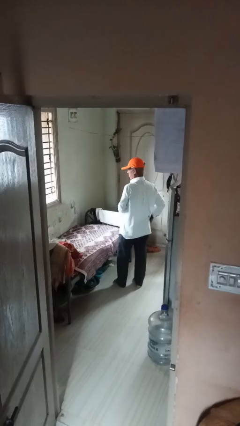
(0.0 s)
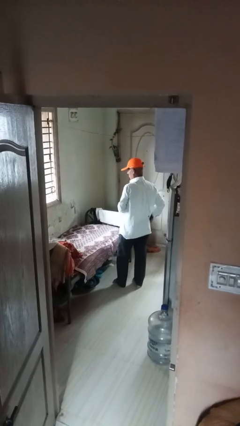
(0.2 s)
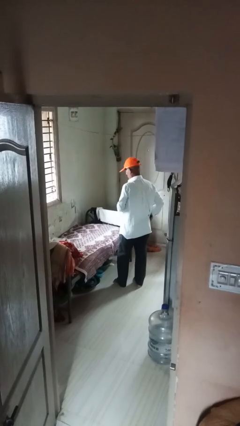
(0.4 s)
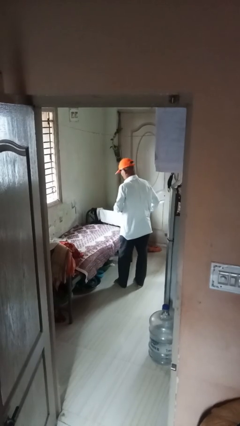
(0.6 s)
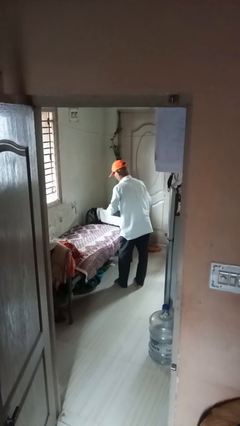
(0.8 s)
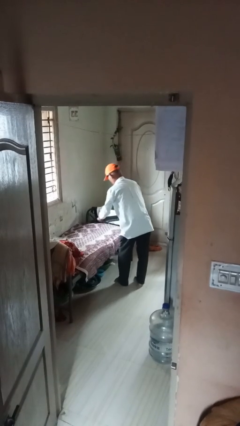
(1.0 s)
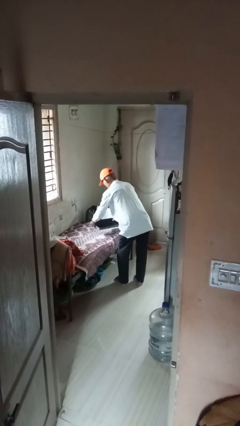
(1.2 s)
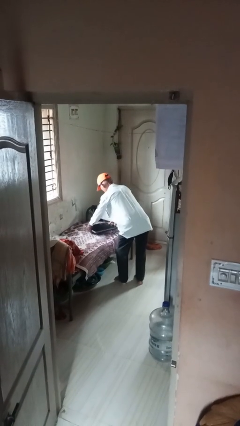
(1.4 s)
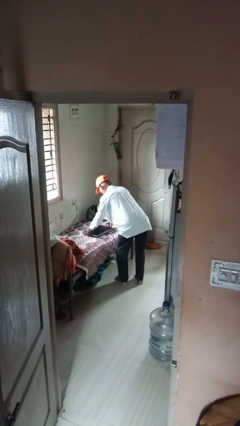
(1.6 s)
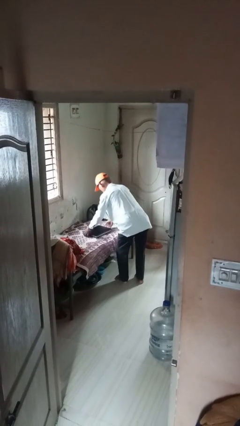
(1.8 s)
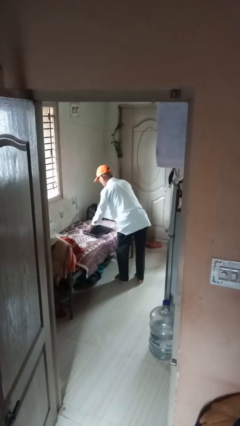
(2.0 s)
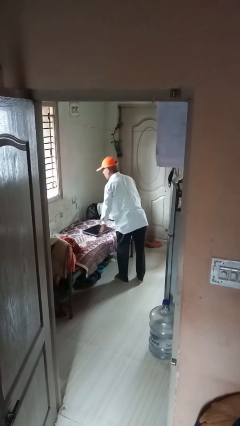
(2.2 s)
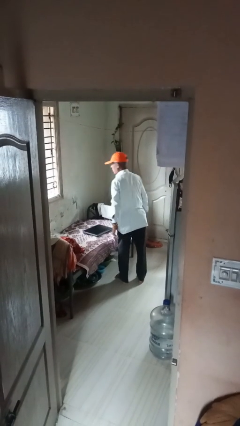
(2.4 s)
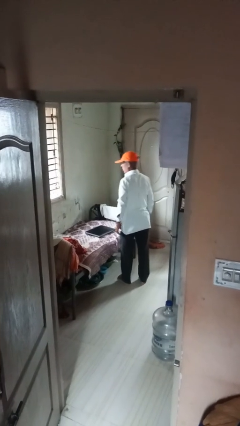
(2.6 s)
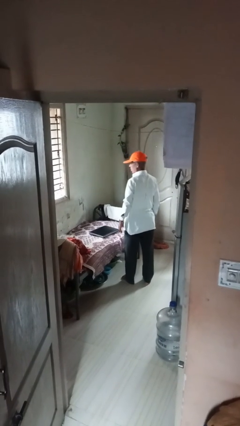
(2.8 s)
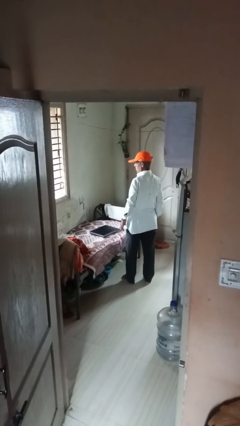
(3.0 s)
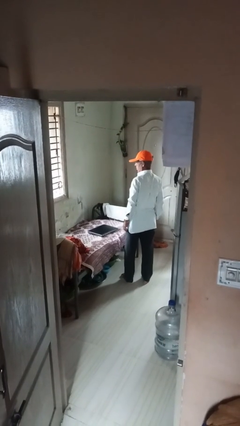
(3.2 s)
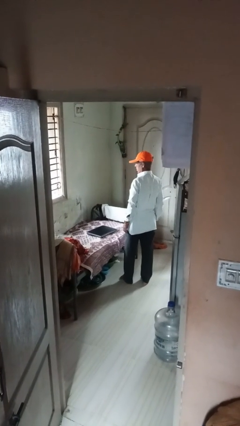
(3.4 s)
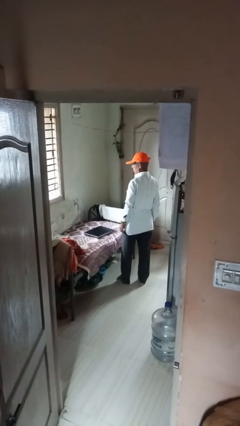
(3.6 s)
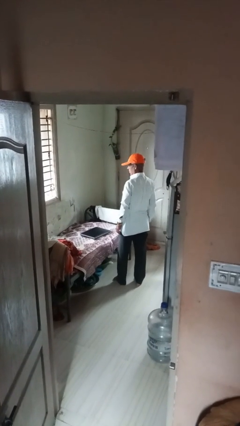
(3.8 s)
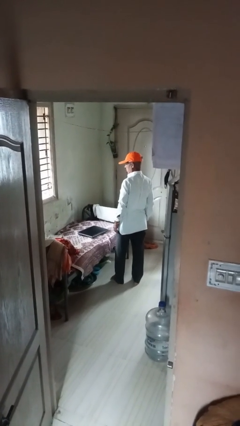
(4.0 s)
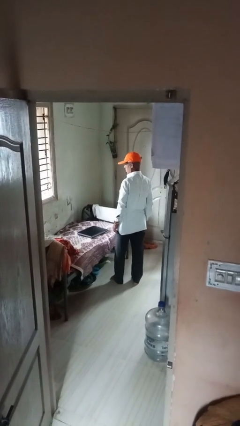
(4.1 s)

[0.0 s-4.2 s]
person puts down object on bed

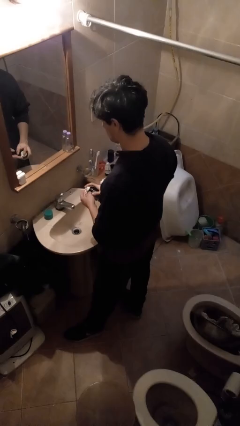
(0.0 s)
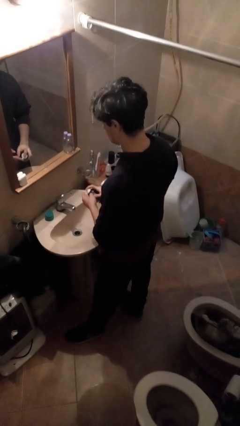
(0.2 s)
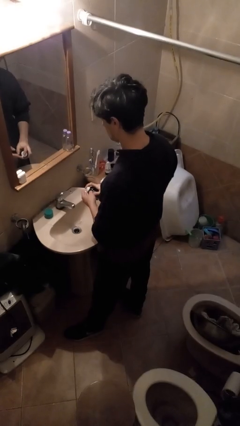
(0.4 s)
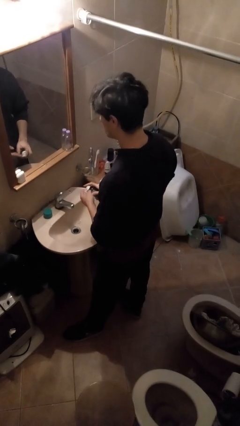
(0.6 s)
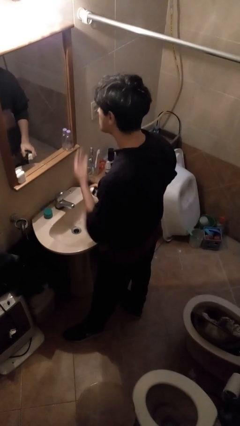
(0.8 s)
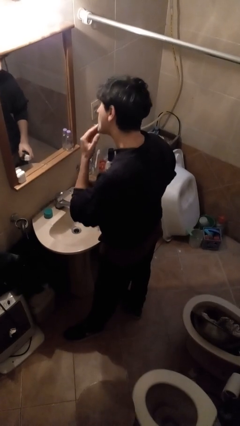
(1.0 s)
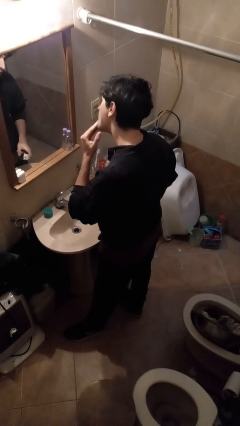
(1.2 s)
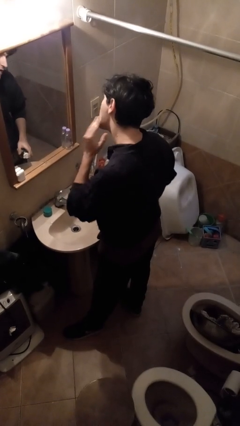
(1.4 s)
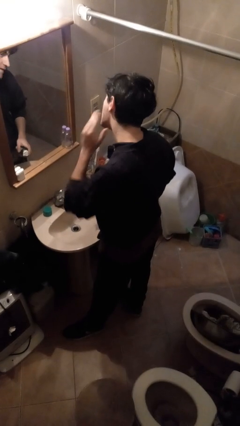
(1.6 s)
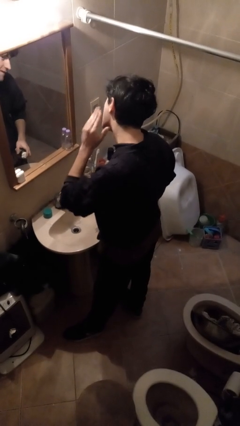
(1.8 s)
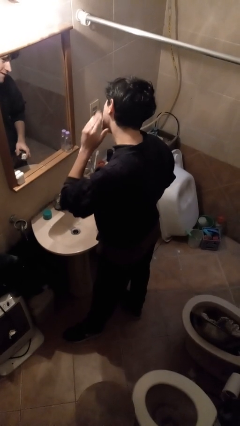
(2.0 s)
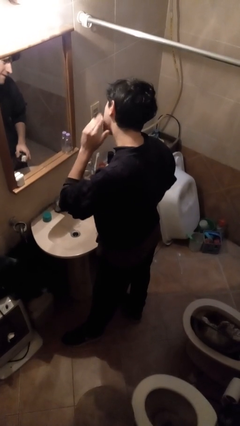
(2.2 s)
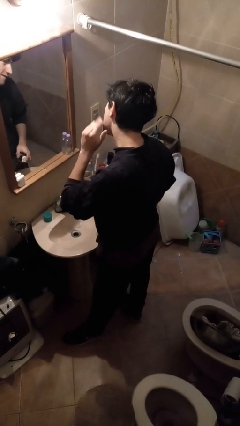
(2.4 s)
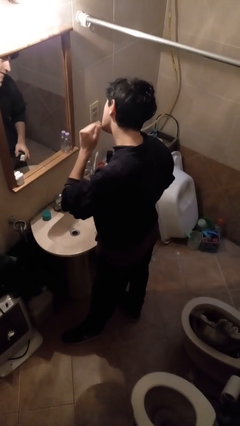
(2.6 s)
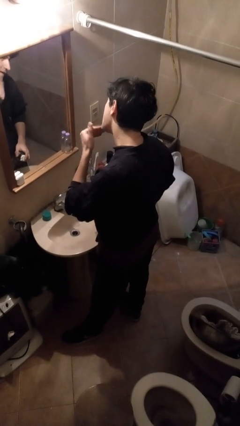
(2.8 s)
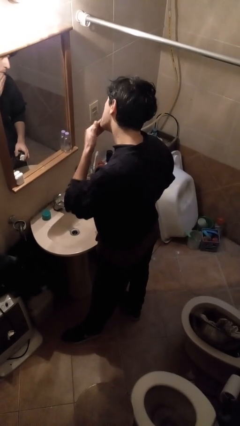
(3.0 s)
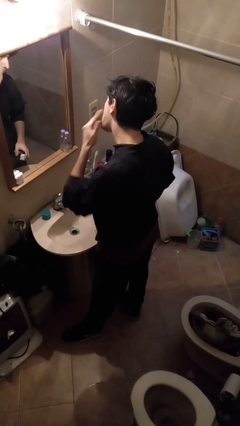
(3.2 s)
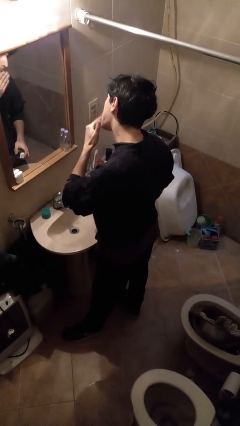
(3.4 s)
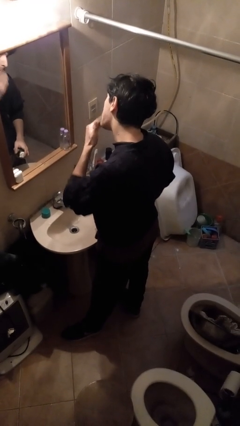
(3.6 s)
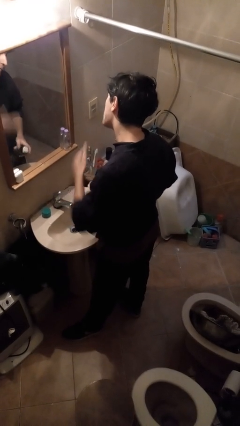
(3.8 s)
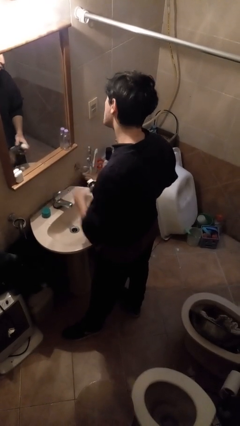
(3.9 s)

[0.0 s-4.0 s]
person applies shaving cream

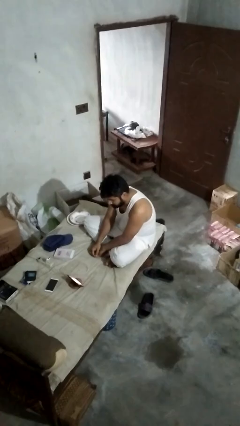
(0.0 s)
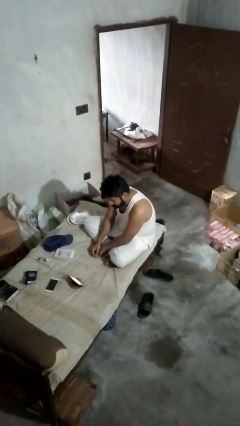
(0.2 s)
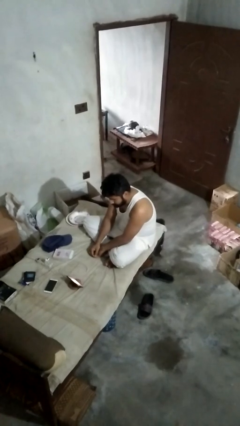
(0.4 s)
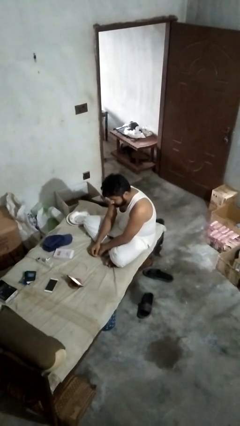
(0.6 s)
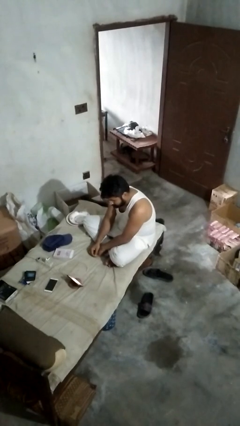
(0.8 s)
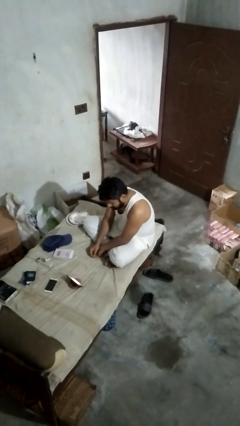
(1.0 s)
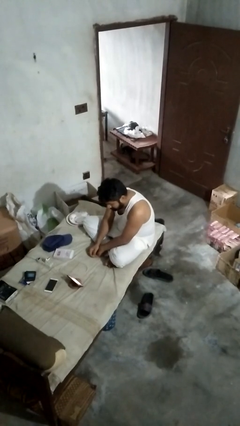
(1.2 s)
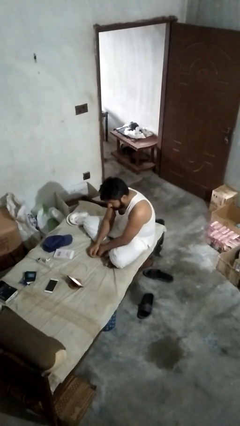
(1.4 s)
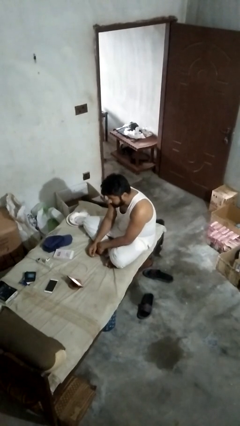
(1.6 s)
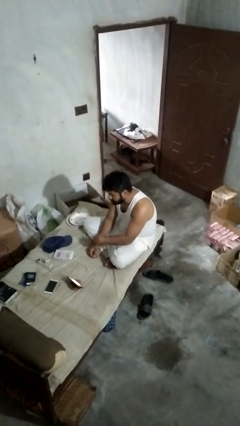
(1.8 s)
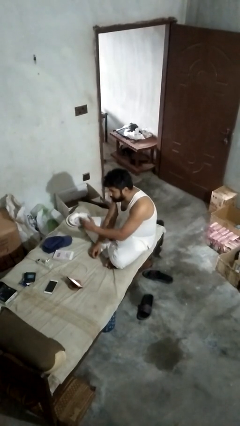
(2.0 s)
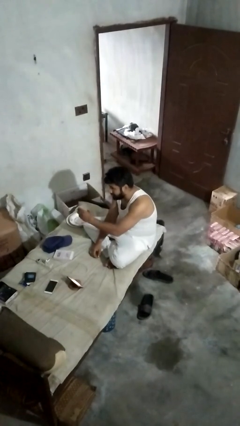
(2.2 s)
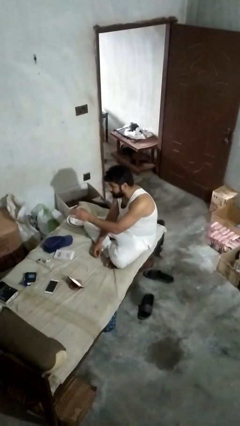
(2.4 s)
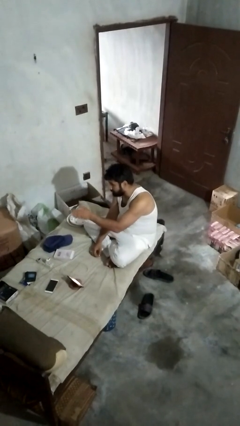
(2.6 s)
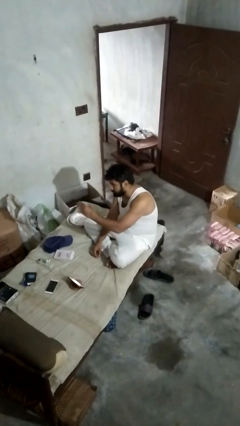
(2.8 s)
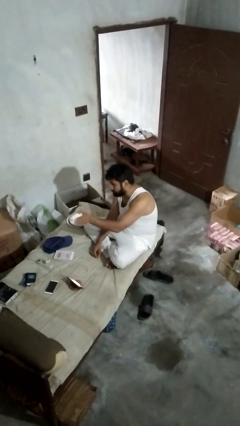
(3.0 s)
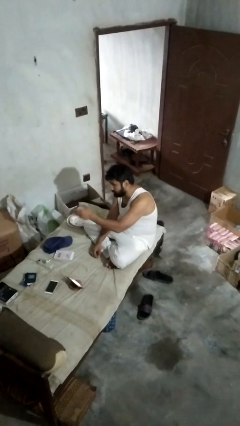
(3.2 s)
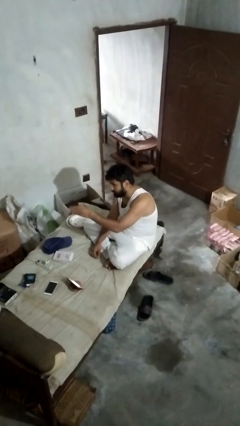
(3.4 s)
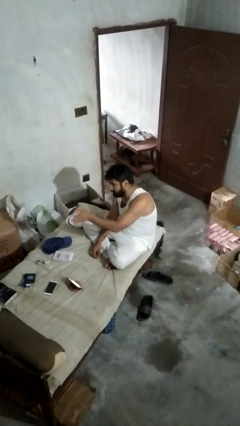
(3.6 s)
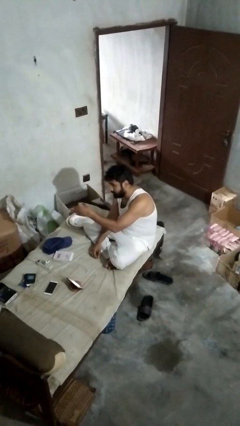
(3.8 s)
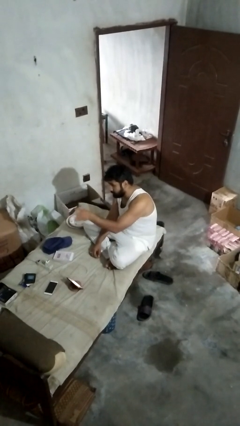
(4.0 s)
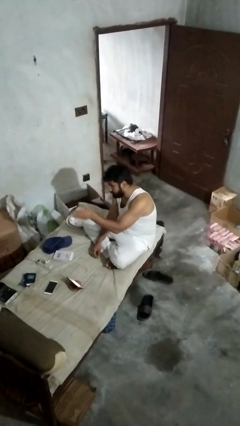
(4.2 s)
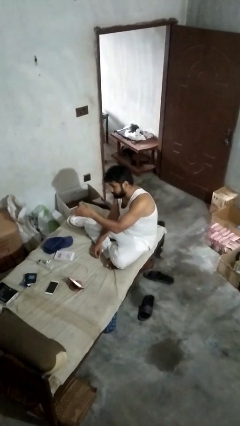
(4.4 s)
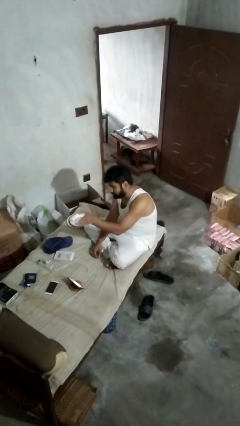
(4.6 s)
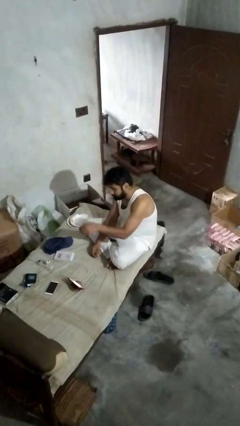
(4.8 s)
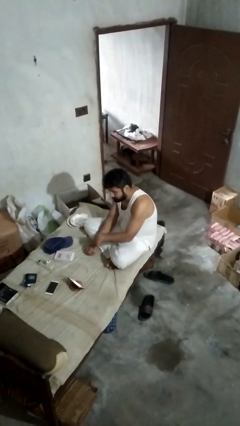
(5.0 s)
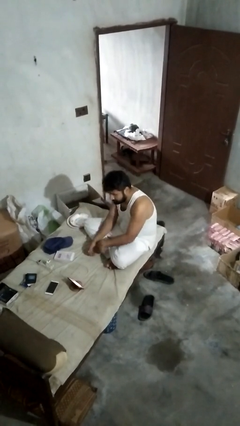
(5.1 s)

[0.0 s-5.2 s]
person gestures swipe left

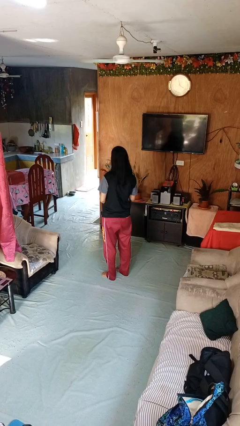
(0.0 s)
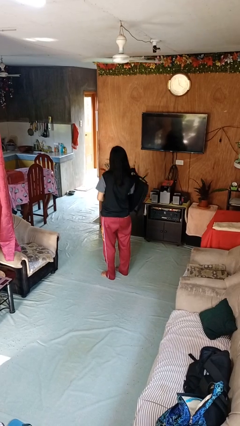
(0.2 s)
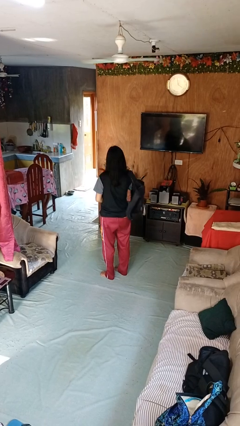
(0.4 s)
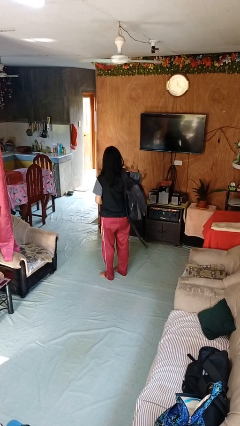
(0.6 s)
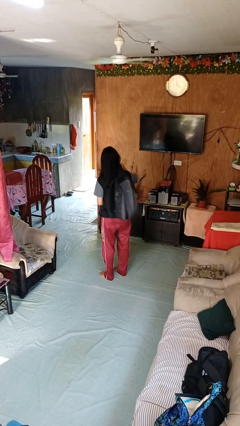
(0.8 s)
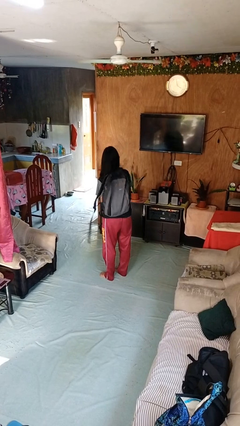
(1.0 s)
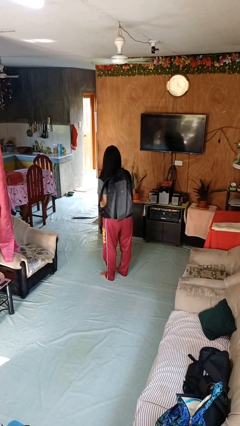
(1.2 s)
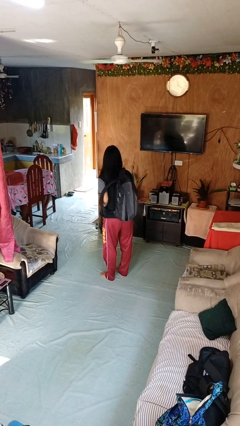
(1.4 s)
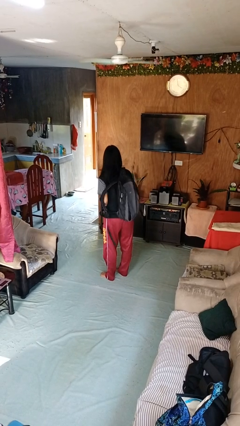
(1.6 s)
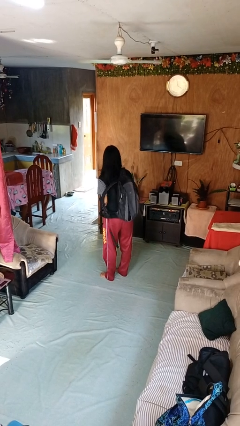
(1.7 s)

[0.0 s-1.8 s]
person puts on backpack

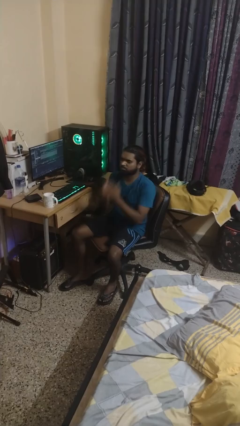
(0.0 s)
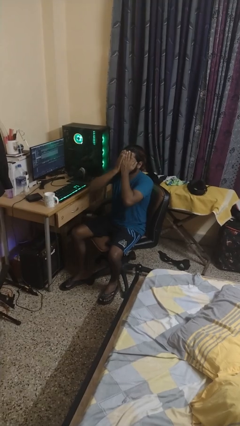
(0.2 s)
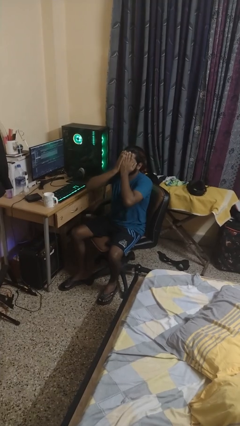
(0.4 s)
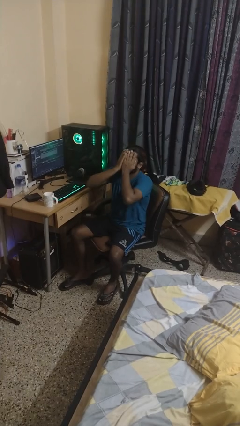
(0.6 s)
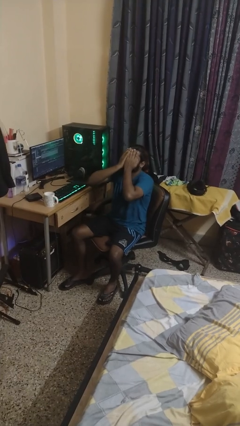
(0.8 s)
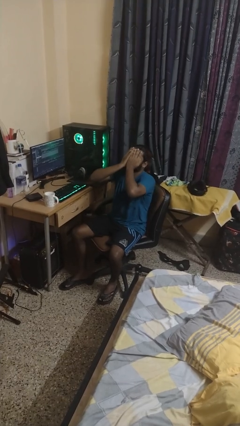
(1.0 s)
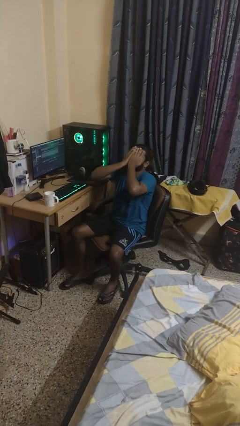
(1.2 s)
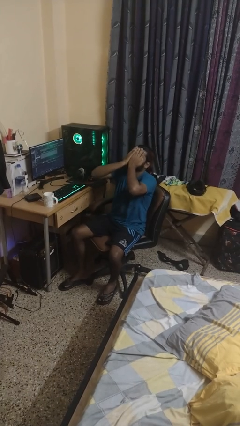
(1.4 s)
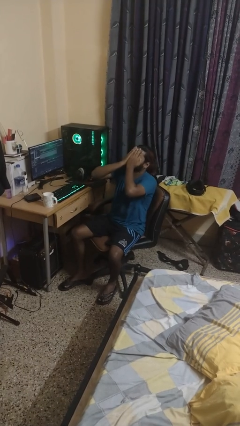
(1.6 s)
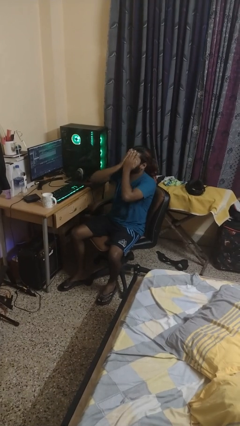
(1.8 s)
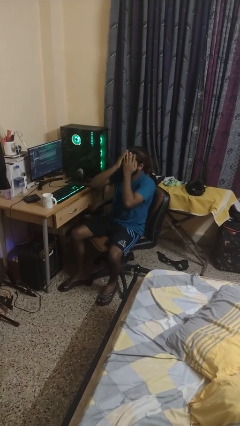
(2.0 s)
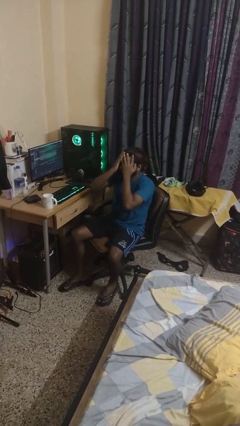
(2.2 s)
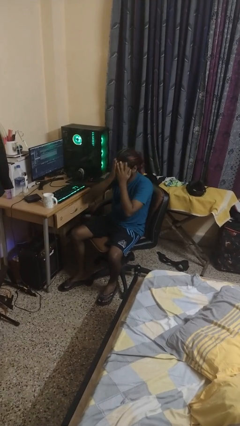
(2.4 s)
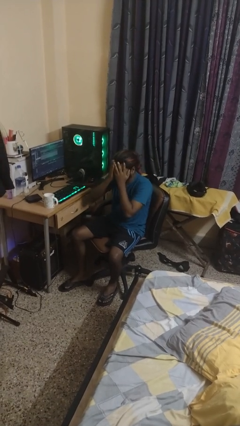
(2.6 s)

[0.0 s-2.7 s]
person covers face with hands
